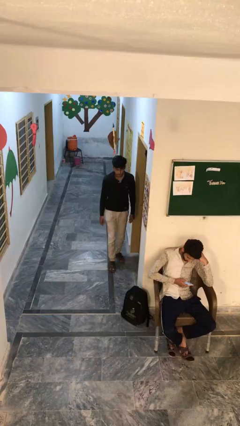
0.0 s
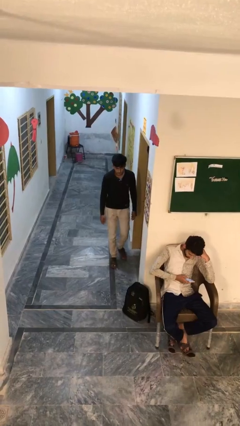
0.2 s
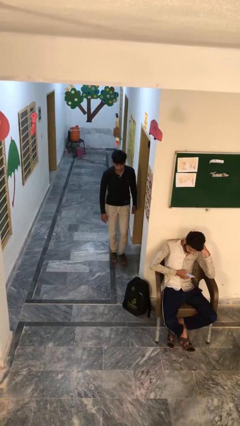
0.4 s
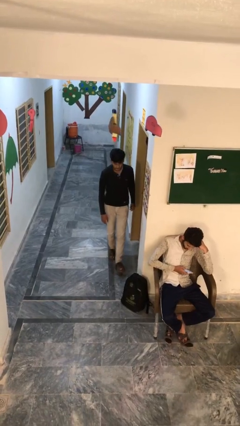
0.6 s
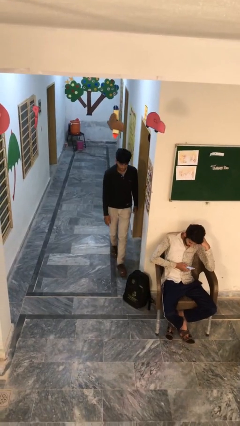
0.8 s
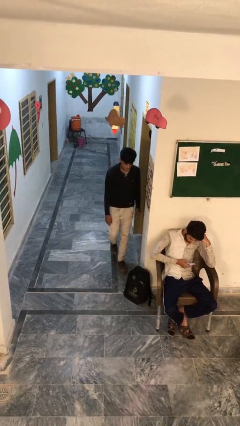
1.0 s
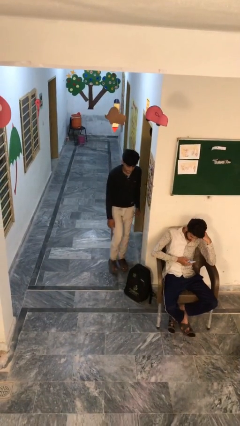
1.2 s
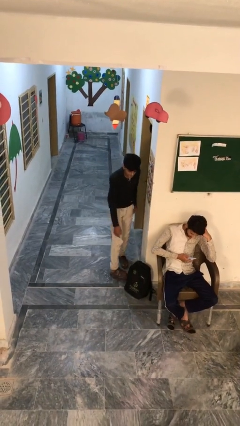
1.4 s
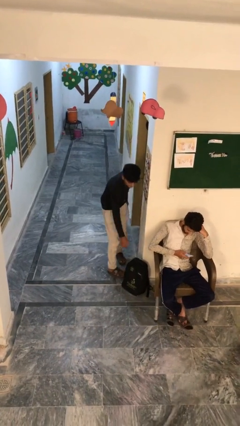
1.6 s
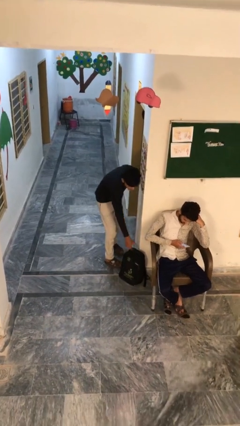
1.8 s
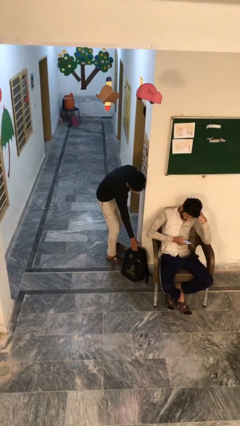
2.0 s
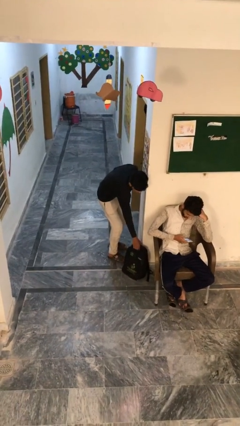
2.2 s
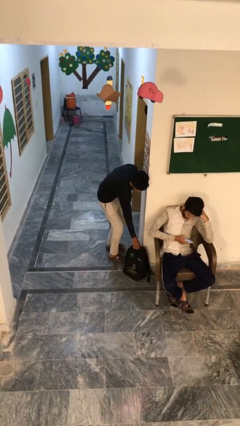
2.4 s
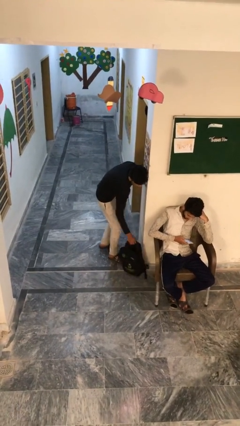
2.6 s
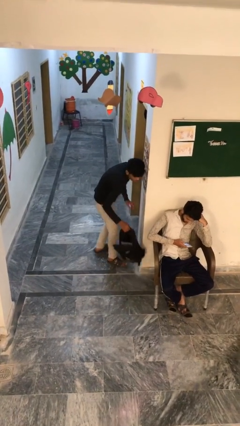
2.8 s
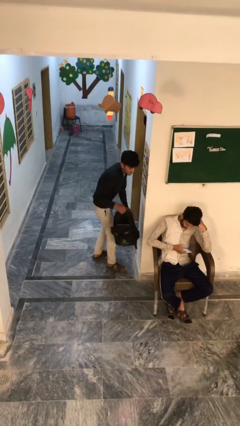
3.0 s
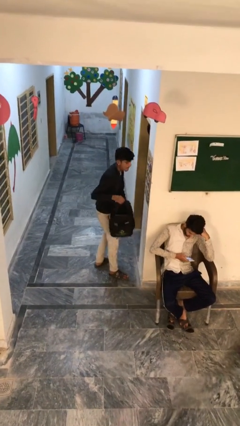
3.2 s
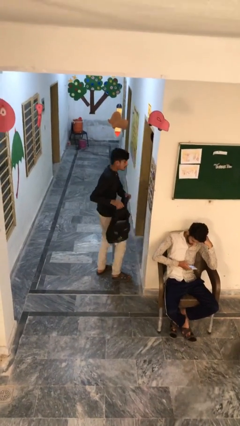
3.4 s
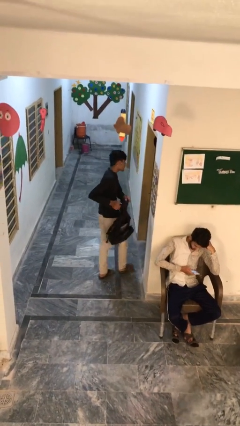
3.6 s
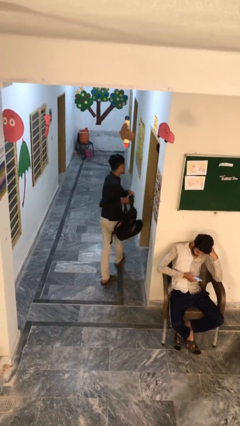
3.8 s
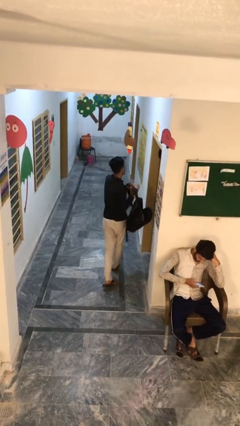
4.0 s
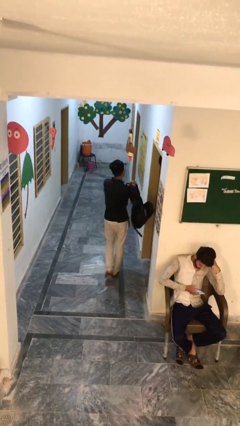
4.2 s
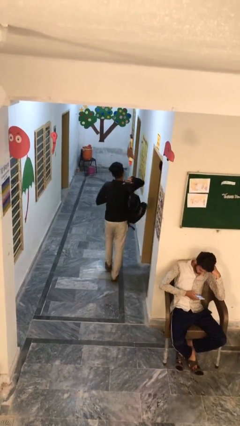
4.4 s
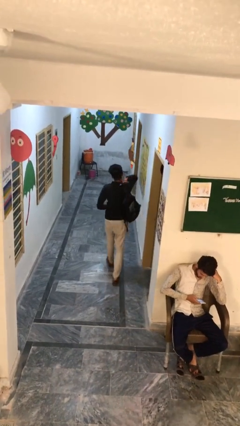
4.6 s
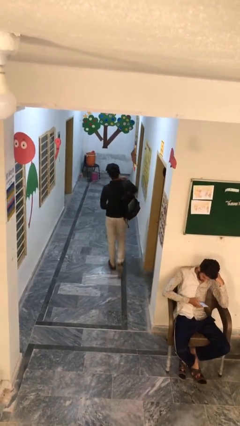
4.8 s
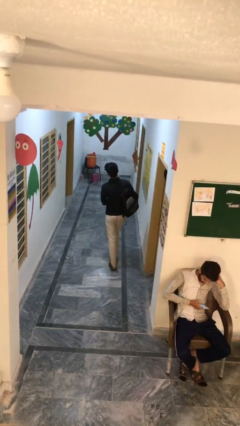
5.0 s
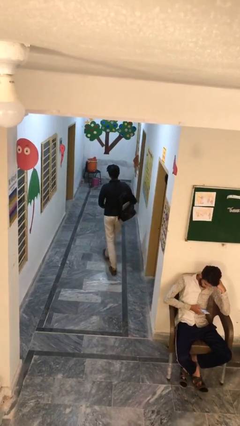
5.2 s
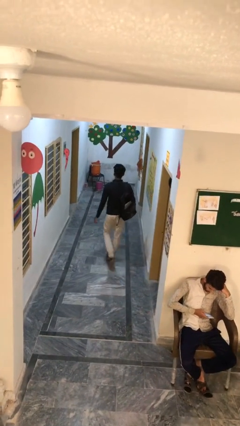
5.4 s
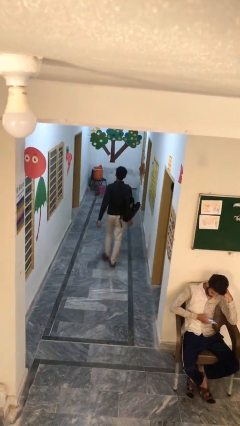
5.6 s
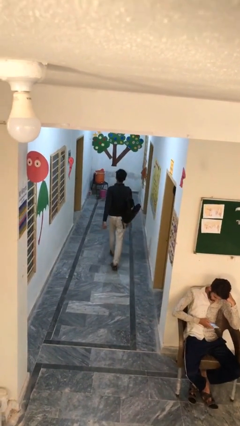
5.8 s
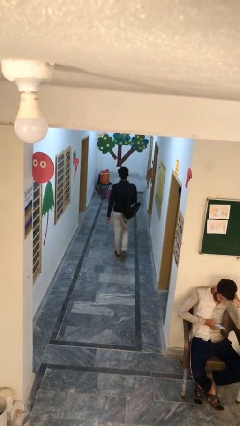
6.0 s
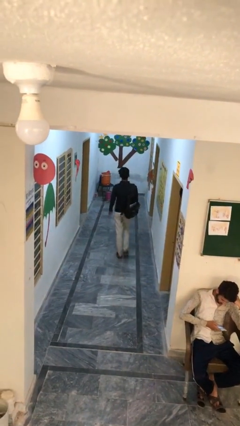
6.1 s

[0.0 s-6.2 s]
person steals object from person

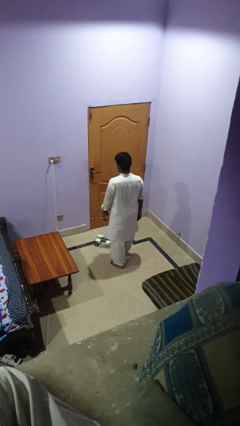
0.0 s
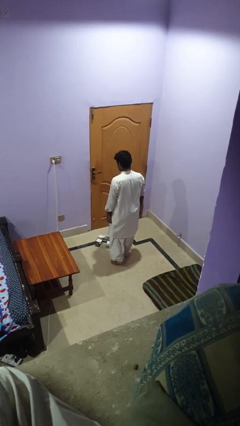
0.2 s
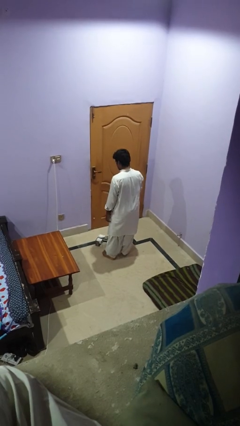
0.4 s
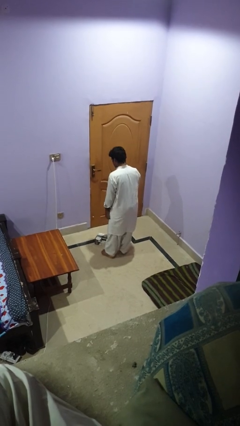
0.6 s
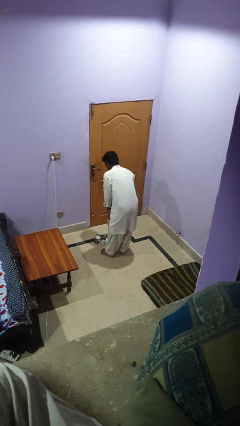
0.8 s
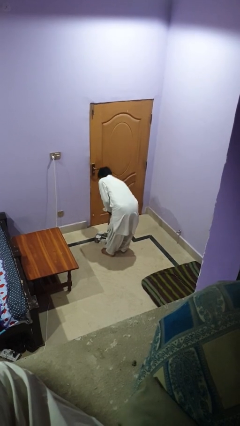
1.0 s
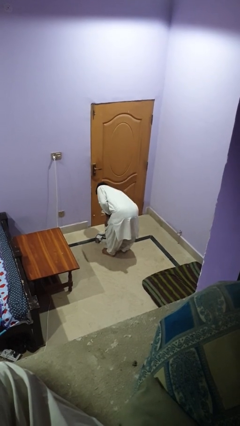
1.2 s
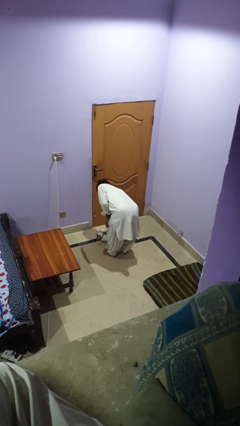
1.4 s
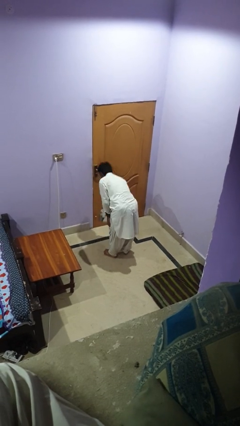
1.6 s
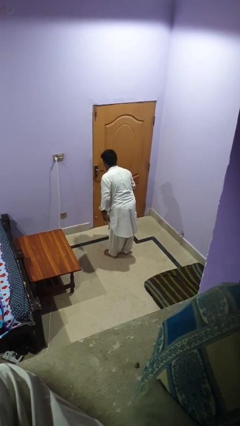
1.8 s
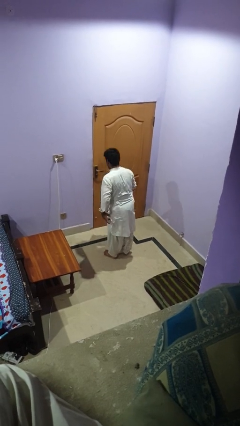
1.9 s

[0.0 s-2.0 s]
person picks up object from floor

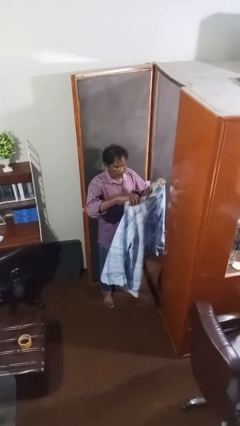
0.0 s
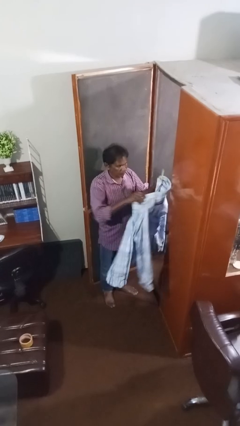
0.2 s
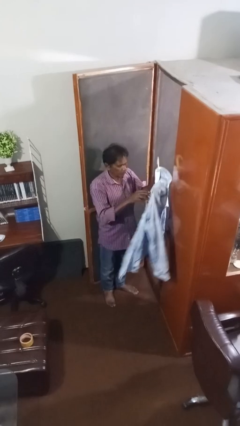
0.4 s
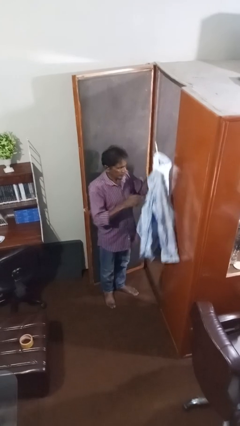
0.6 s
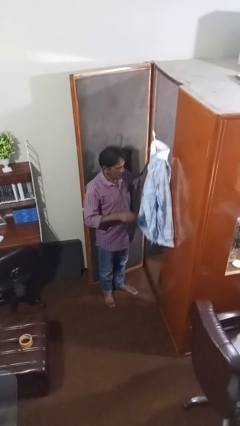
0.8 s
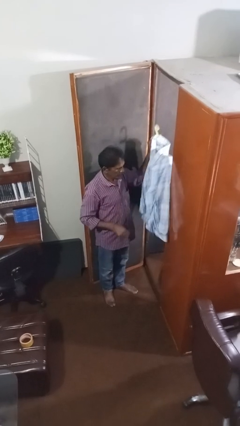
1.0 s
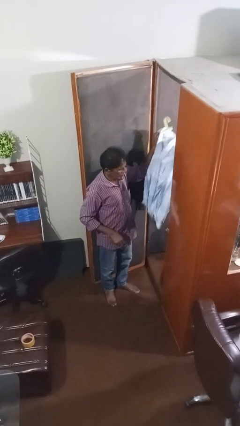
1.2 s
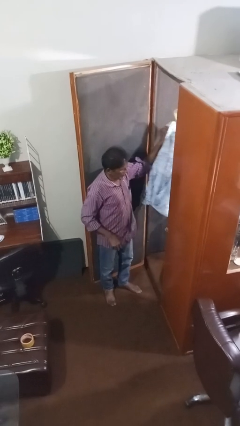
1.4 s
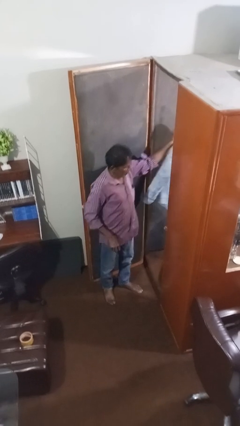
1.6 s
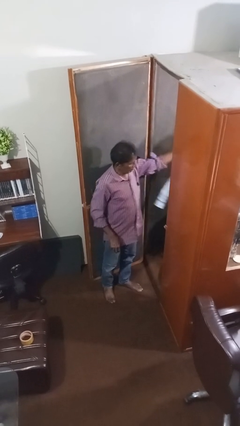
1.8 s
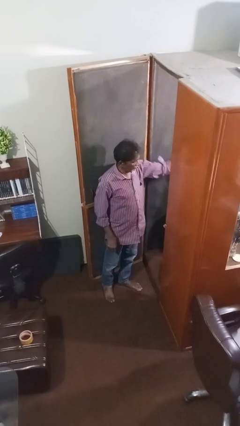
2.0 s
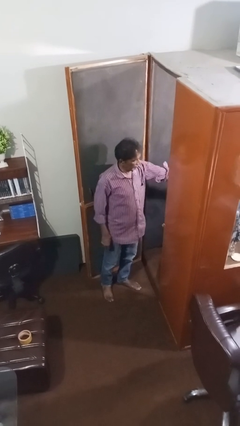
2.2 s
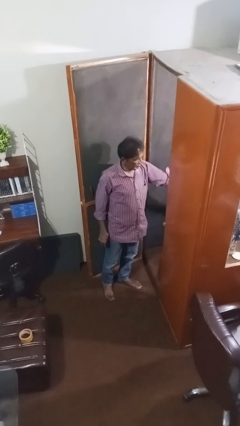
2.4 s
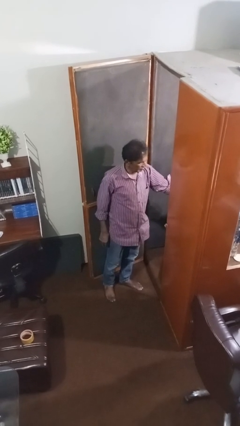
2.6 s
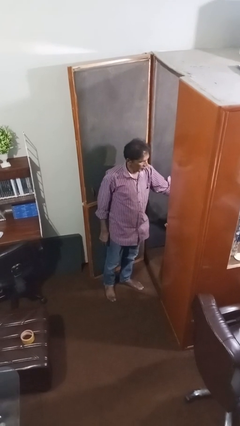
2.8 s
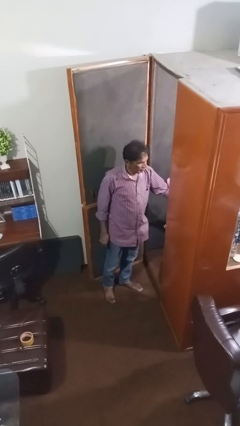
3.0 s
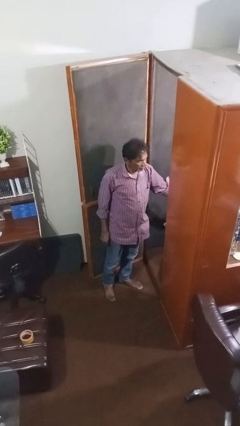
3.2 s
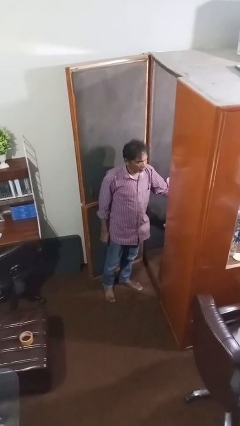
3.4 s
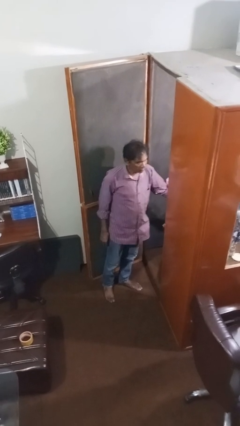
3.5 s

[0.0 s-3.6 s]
person puts clothes into closet

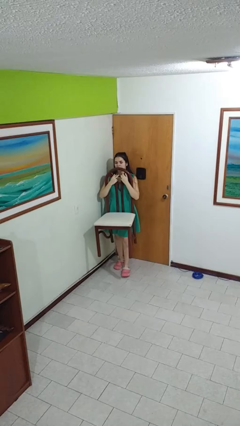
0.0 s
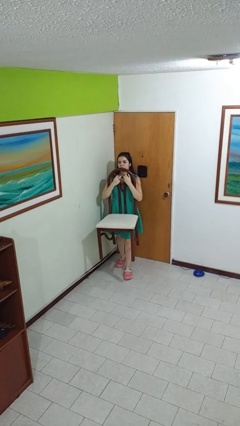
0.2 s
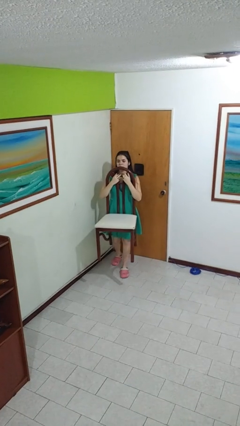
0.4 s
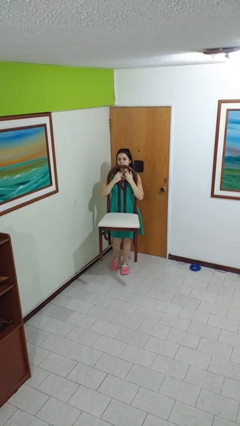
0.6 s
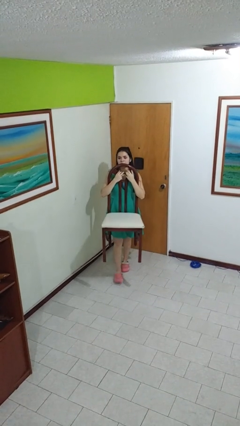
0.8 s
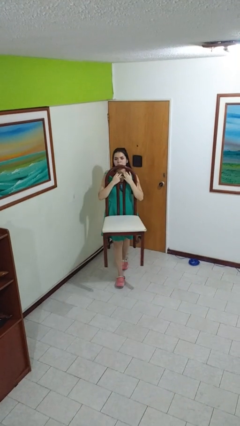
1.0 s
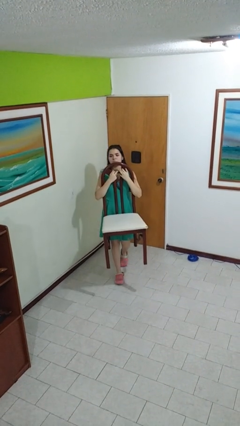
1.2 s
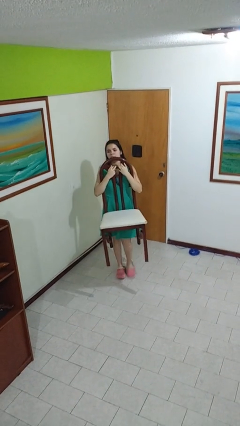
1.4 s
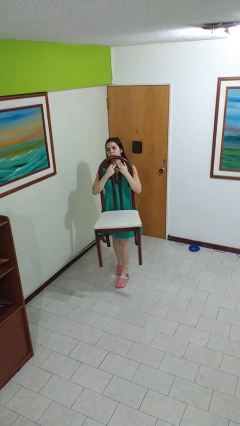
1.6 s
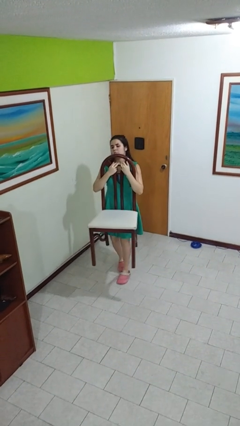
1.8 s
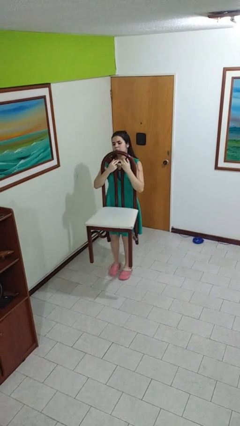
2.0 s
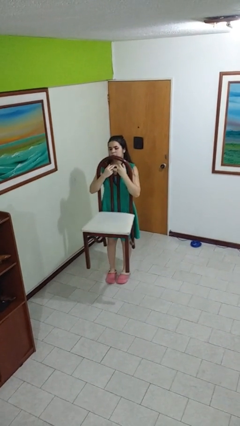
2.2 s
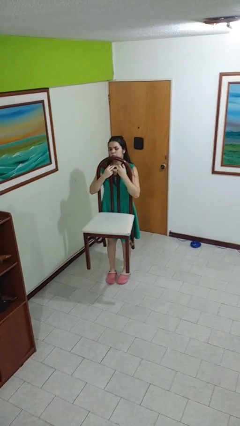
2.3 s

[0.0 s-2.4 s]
person carries furniture

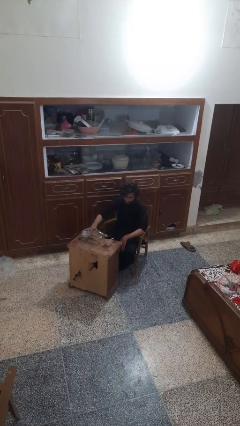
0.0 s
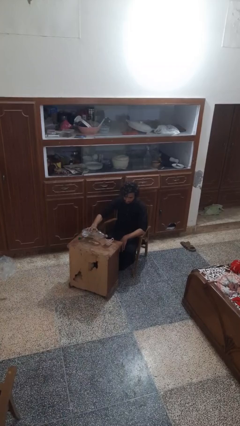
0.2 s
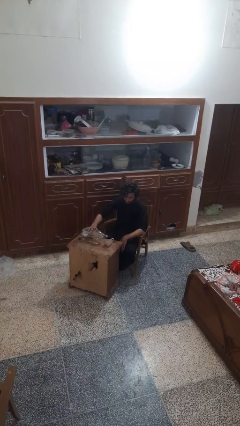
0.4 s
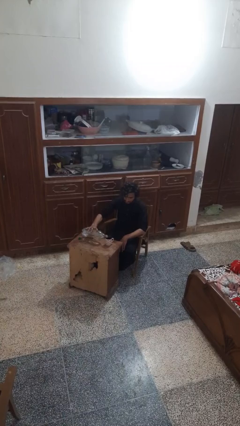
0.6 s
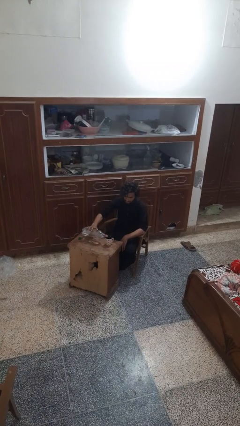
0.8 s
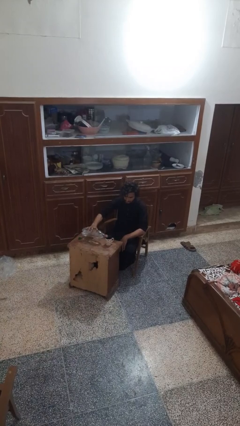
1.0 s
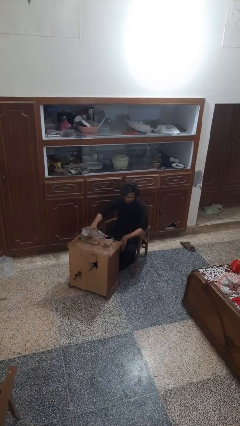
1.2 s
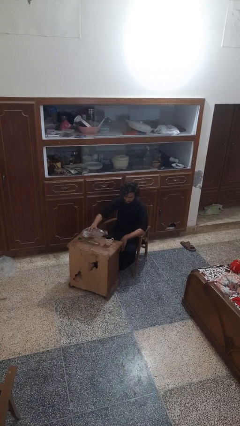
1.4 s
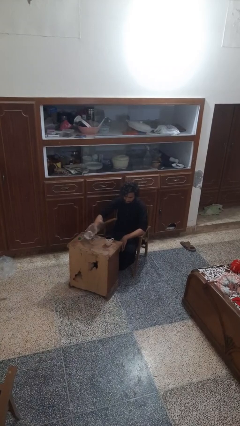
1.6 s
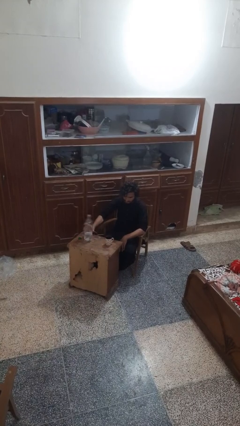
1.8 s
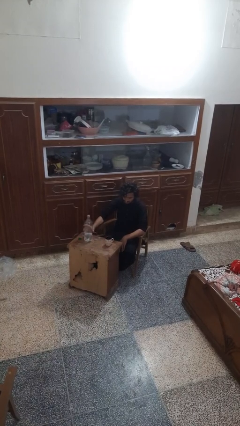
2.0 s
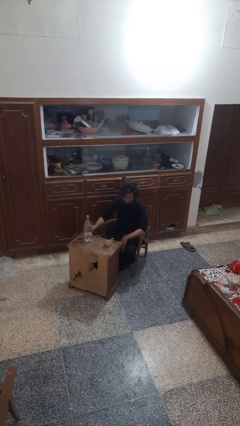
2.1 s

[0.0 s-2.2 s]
person pours liquid into cup

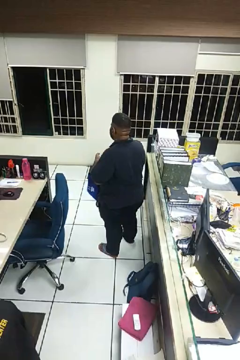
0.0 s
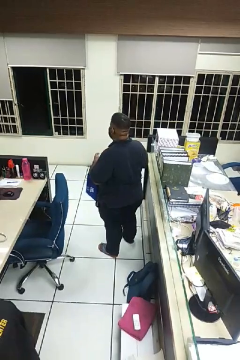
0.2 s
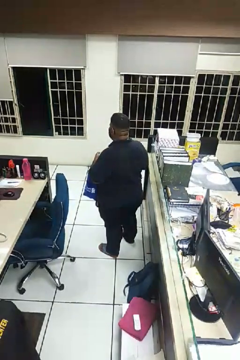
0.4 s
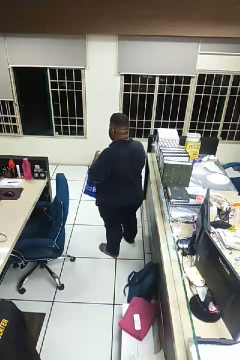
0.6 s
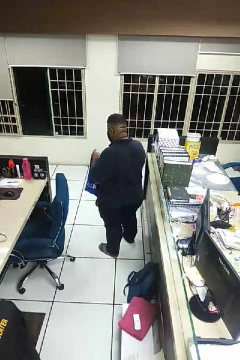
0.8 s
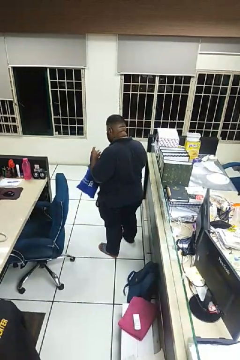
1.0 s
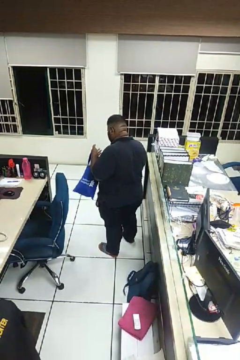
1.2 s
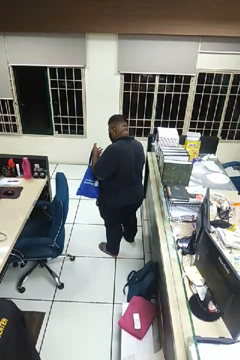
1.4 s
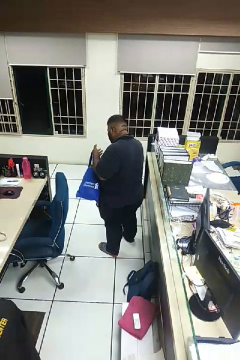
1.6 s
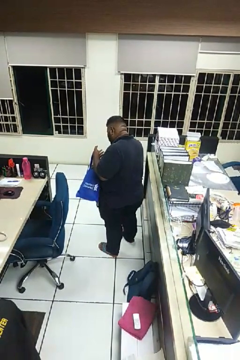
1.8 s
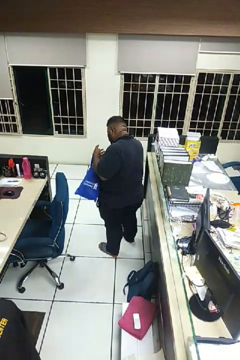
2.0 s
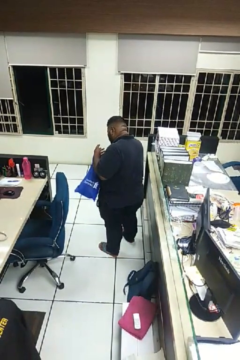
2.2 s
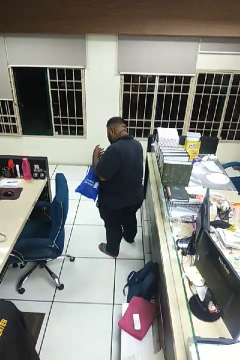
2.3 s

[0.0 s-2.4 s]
person searches in bag
